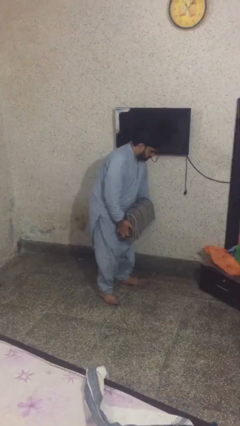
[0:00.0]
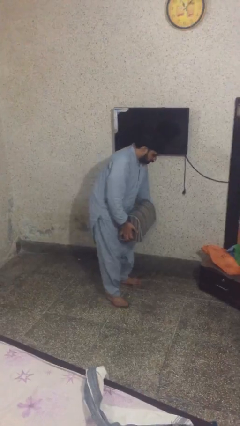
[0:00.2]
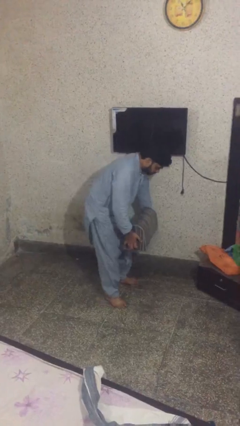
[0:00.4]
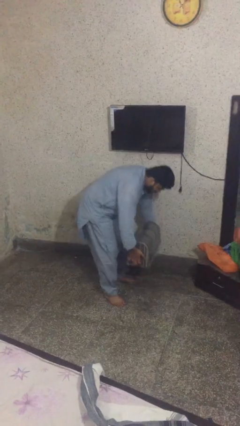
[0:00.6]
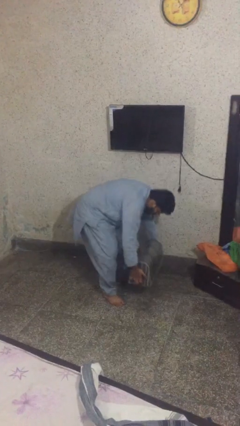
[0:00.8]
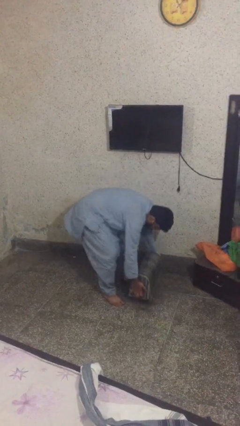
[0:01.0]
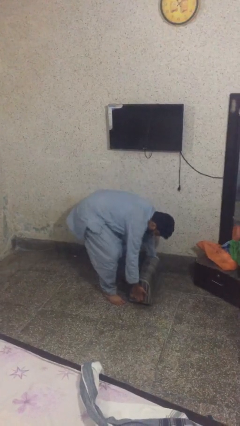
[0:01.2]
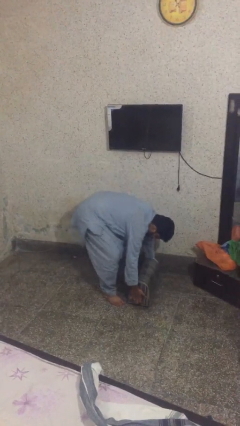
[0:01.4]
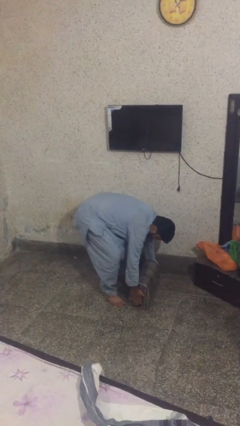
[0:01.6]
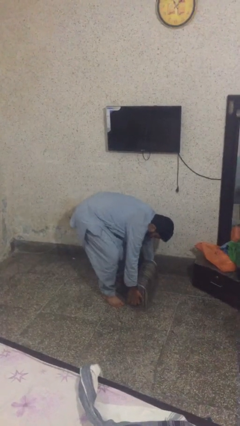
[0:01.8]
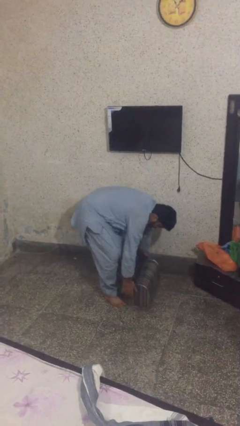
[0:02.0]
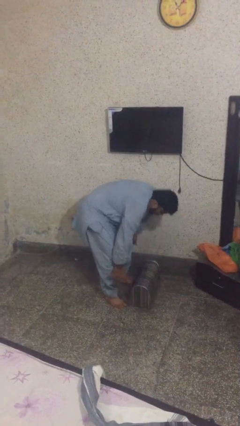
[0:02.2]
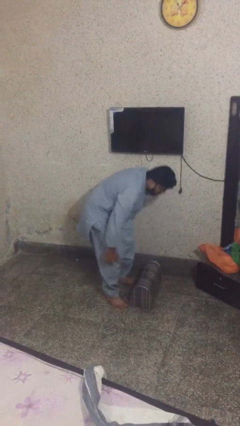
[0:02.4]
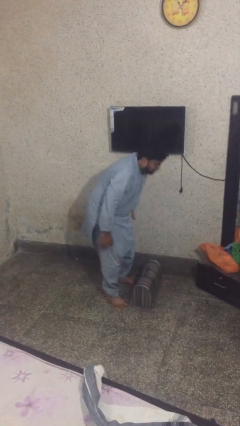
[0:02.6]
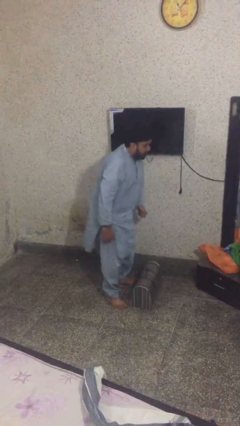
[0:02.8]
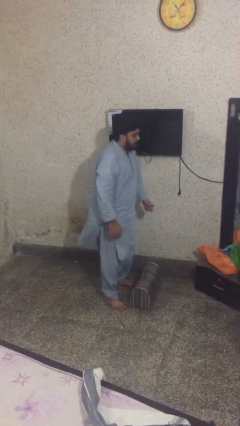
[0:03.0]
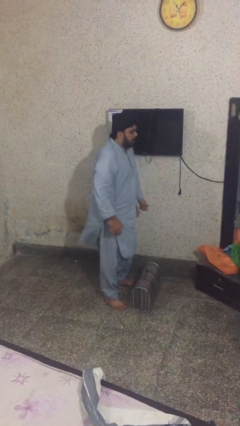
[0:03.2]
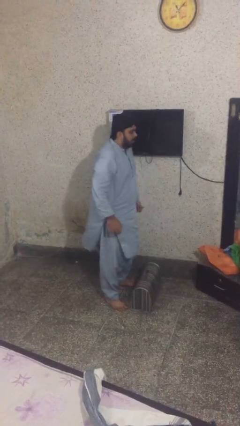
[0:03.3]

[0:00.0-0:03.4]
person puts down object on floor

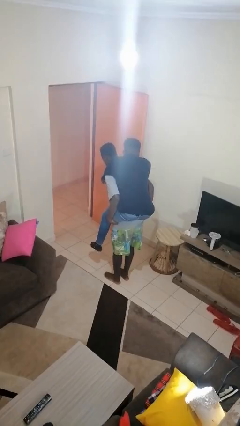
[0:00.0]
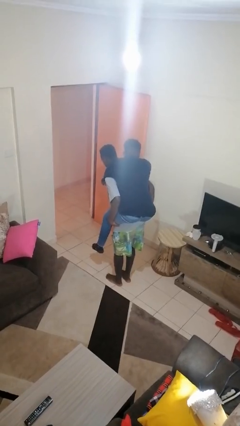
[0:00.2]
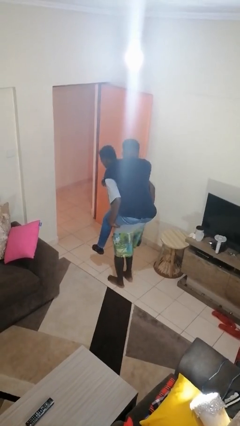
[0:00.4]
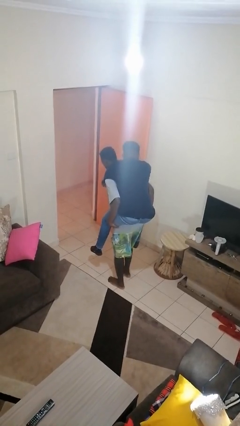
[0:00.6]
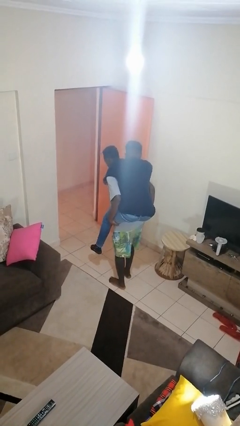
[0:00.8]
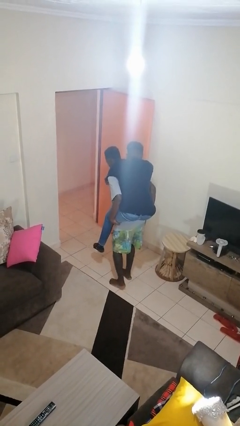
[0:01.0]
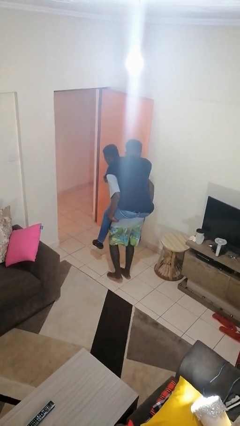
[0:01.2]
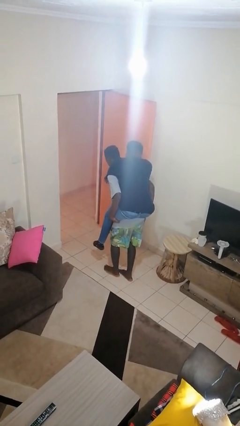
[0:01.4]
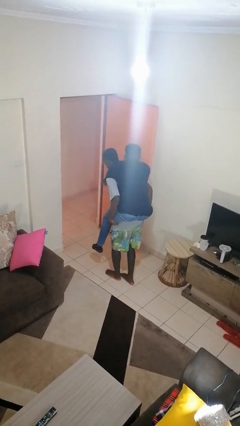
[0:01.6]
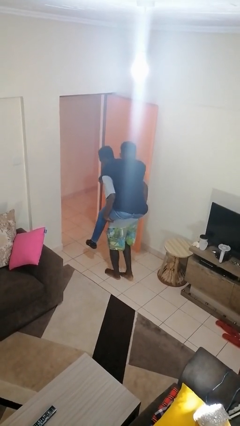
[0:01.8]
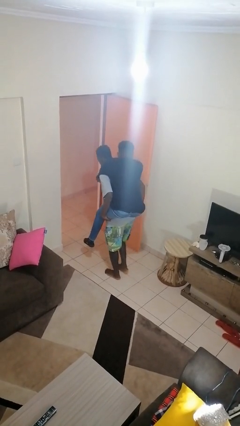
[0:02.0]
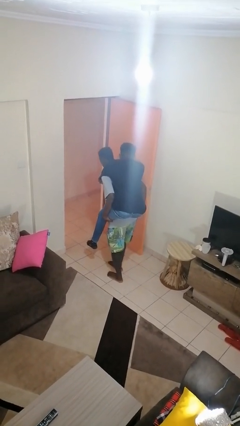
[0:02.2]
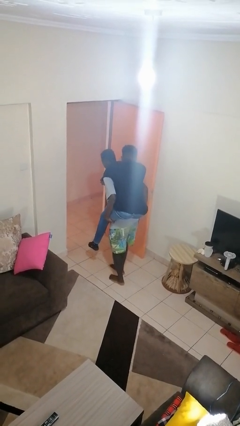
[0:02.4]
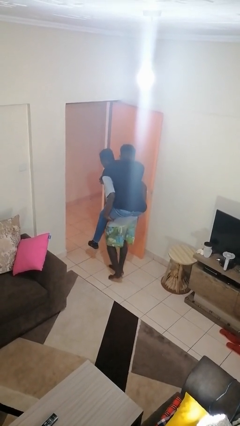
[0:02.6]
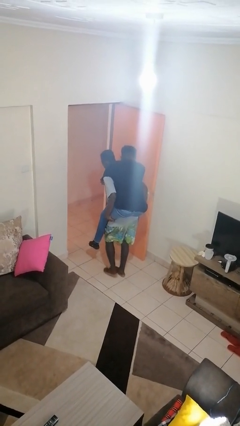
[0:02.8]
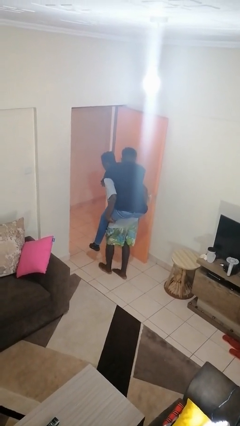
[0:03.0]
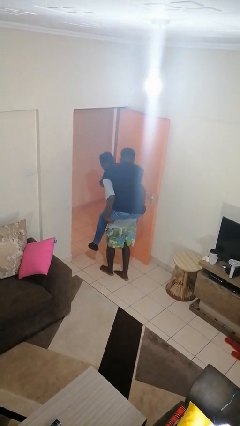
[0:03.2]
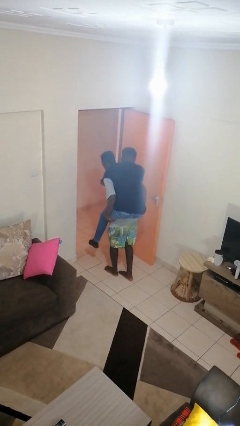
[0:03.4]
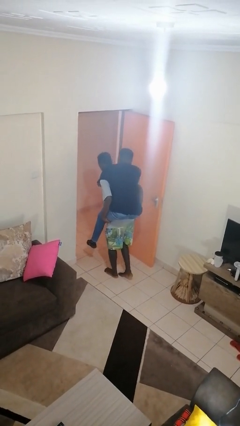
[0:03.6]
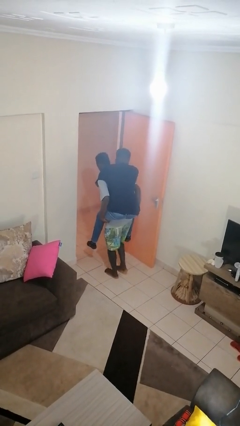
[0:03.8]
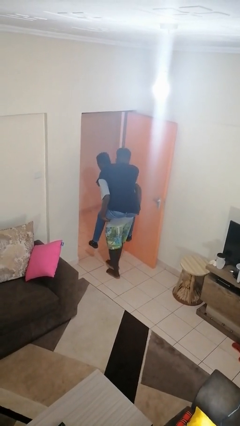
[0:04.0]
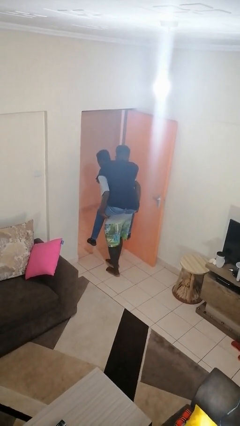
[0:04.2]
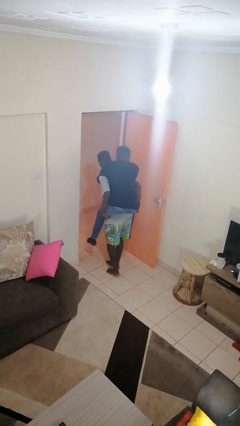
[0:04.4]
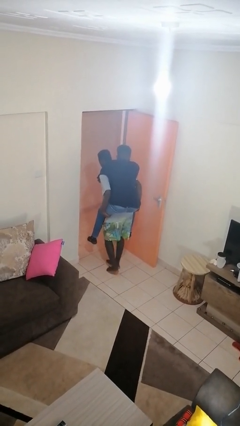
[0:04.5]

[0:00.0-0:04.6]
person carries person on back

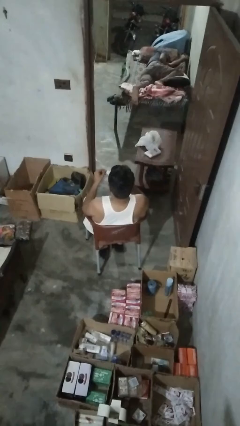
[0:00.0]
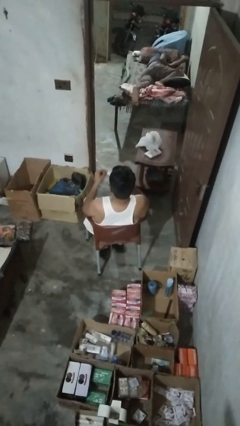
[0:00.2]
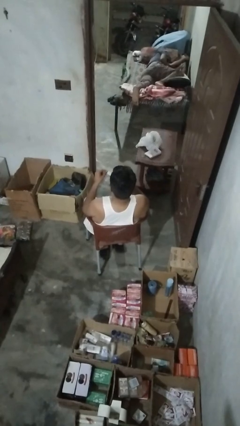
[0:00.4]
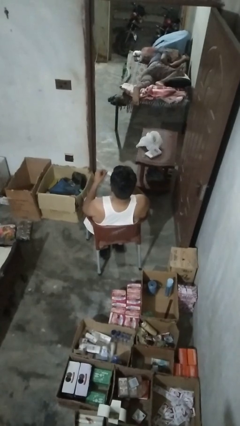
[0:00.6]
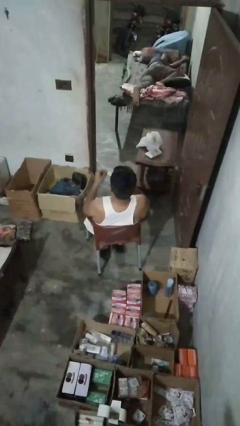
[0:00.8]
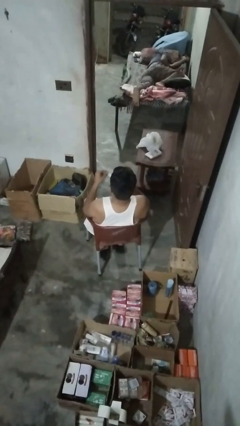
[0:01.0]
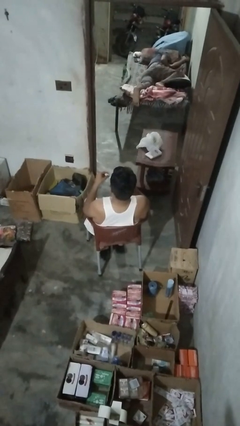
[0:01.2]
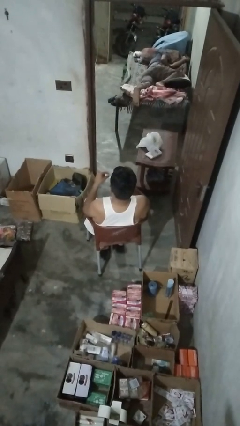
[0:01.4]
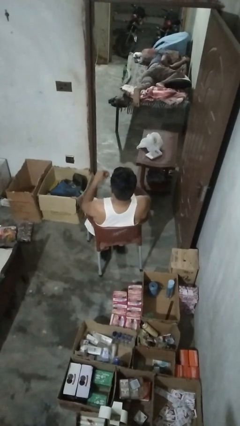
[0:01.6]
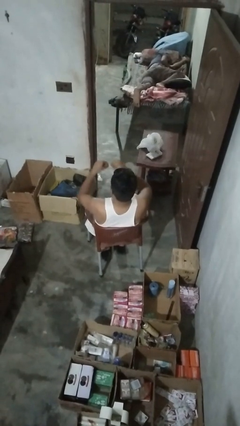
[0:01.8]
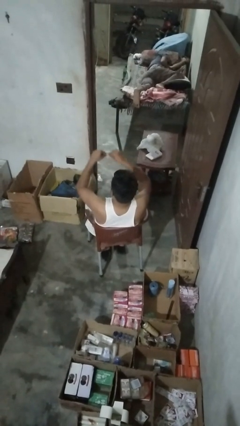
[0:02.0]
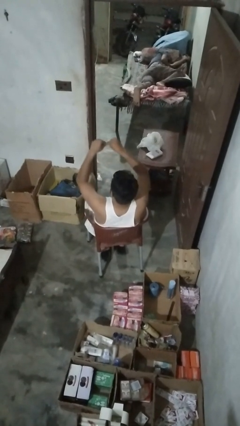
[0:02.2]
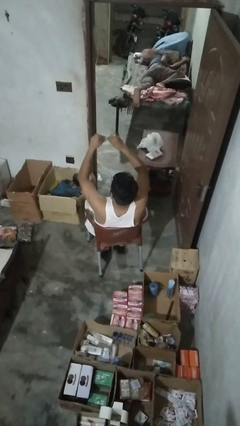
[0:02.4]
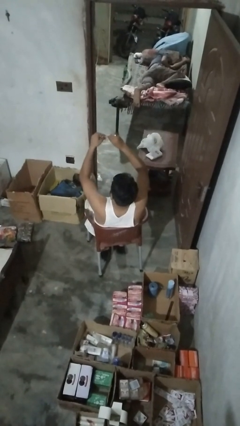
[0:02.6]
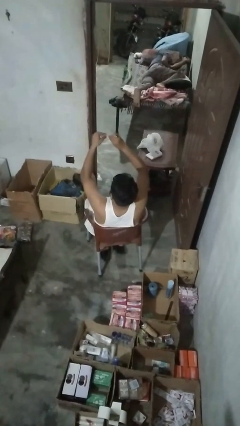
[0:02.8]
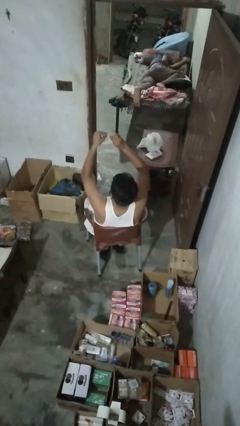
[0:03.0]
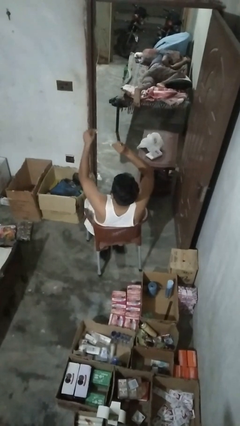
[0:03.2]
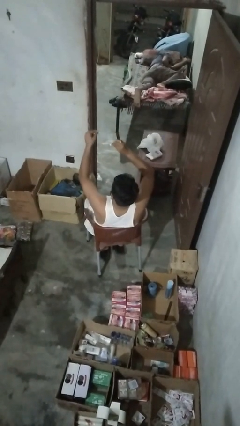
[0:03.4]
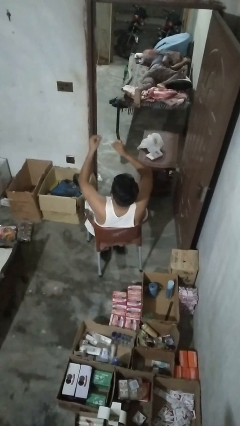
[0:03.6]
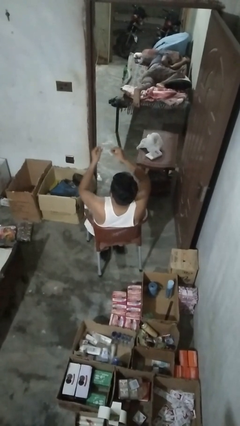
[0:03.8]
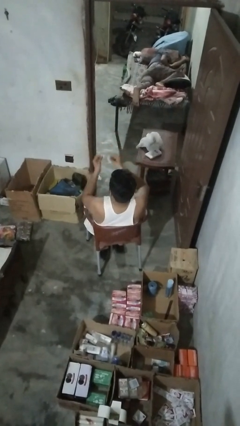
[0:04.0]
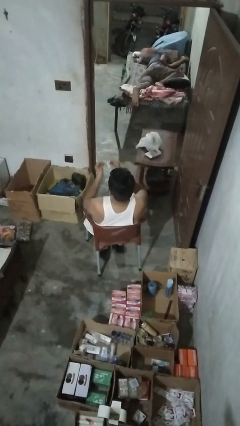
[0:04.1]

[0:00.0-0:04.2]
person tears paper

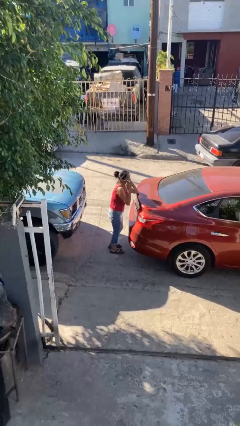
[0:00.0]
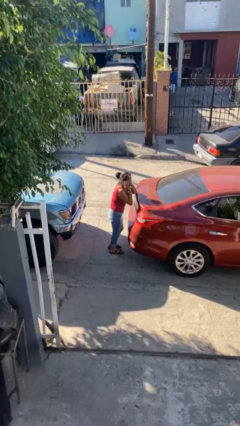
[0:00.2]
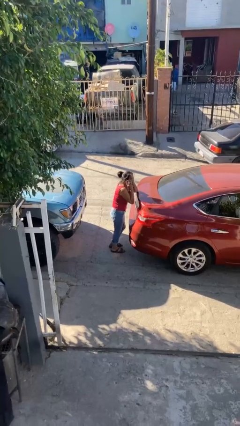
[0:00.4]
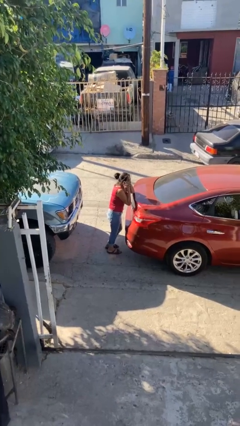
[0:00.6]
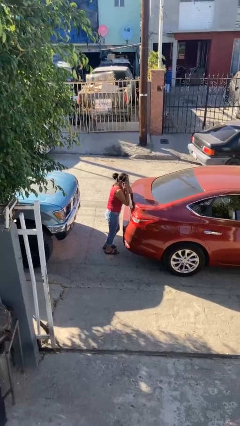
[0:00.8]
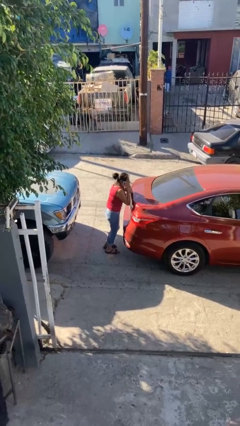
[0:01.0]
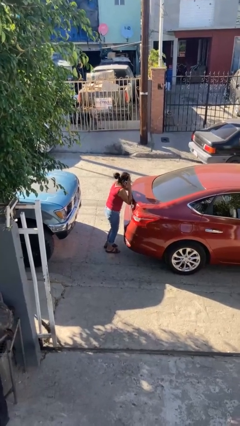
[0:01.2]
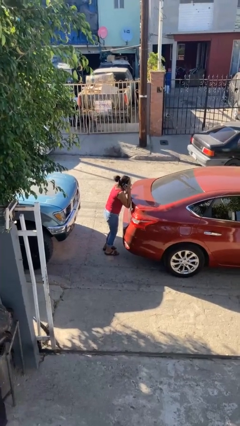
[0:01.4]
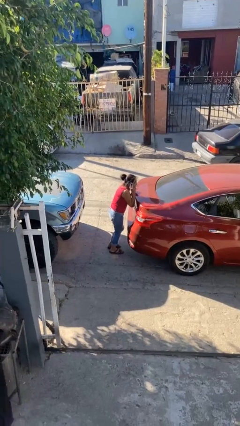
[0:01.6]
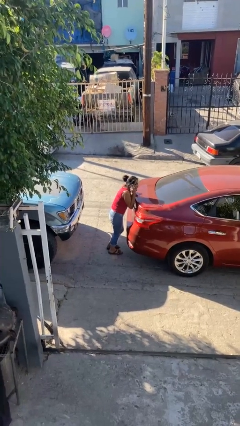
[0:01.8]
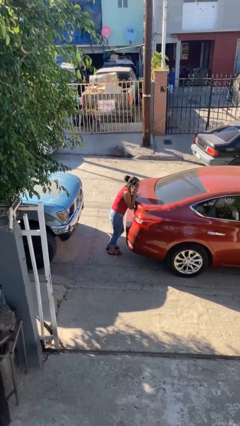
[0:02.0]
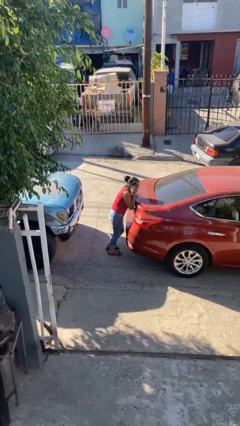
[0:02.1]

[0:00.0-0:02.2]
person leans against car

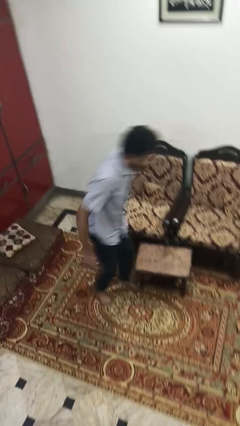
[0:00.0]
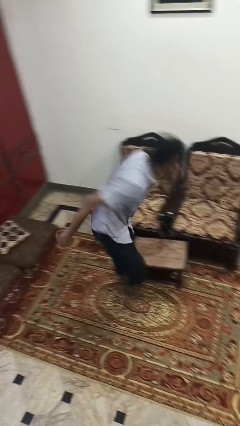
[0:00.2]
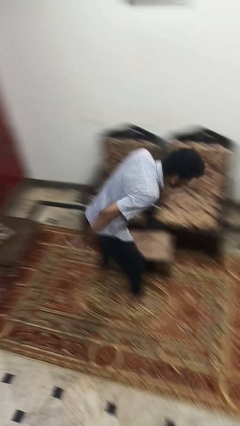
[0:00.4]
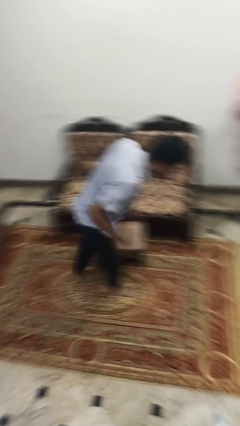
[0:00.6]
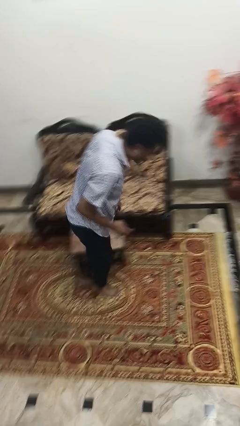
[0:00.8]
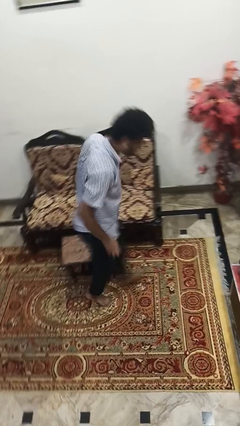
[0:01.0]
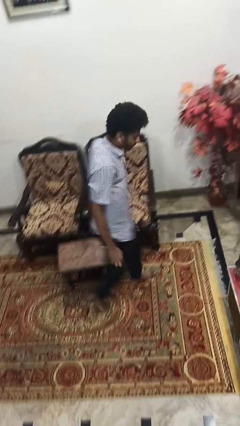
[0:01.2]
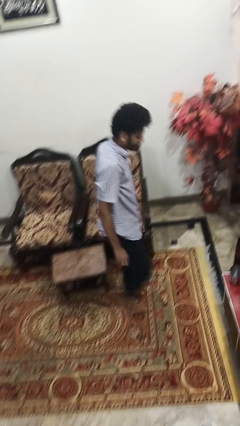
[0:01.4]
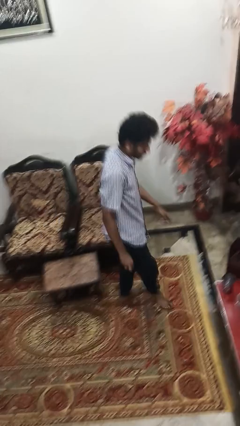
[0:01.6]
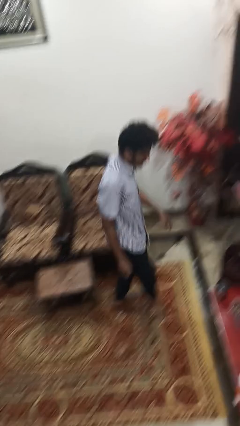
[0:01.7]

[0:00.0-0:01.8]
person bumps into table

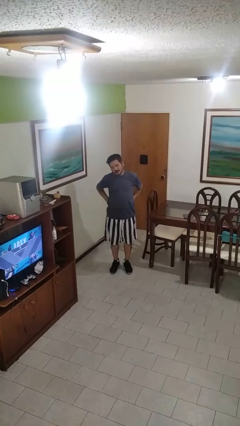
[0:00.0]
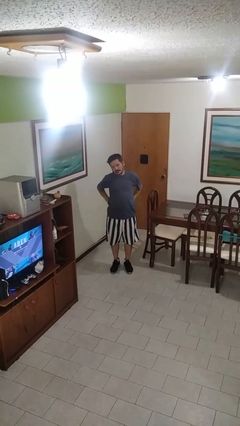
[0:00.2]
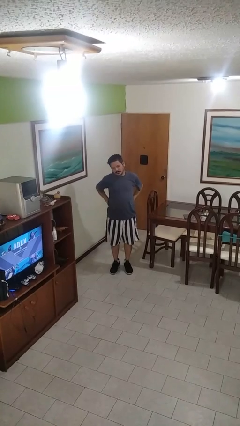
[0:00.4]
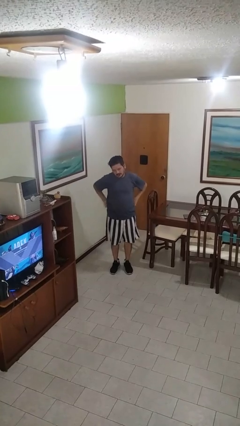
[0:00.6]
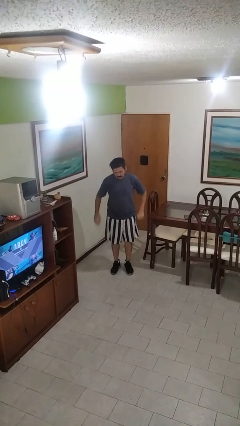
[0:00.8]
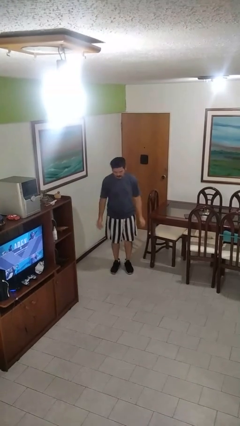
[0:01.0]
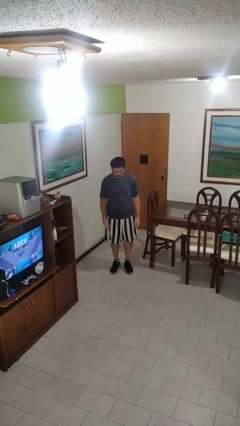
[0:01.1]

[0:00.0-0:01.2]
person stretches back

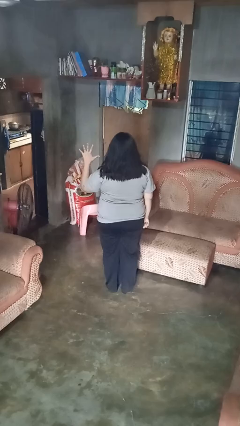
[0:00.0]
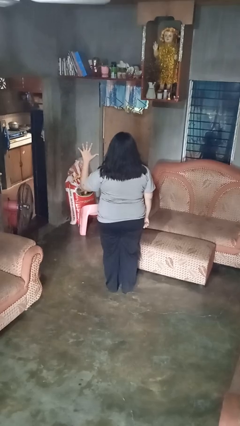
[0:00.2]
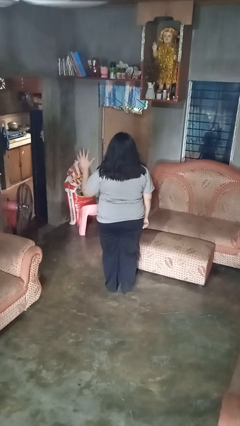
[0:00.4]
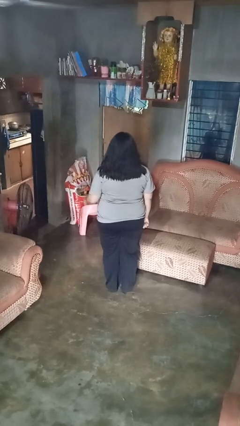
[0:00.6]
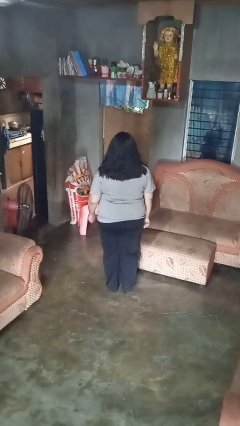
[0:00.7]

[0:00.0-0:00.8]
person gestures number five
